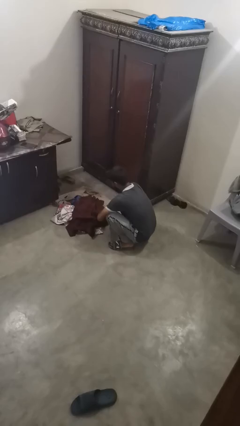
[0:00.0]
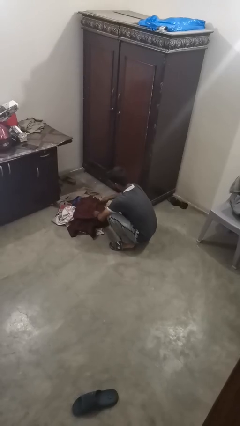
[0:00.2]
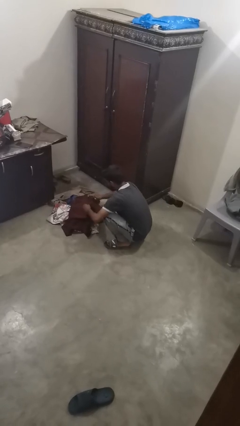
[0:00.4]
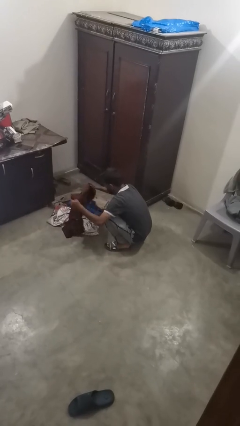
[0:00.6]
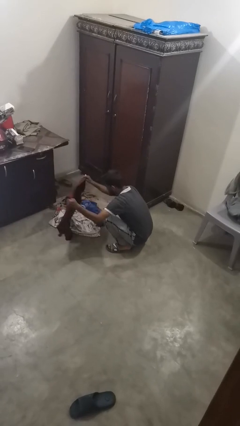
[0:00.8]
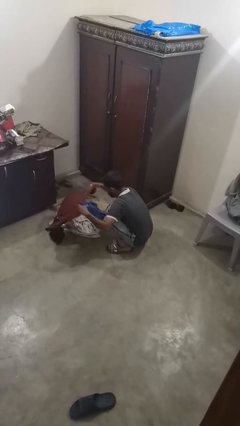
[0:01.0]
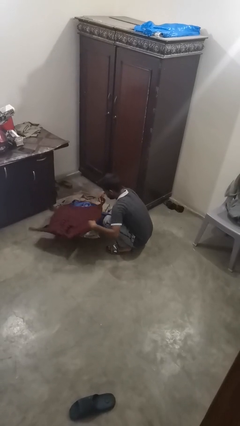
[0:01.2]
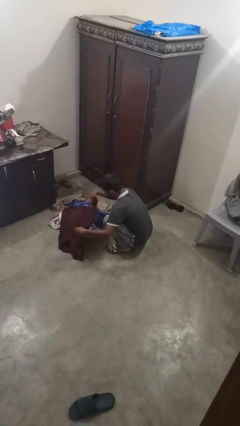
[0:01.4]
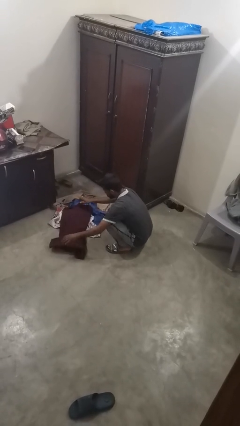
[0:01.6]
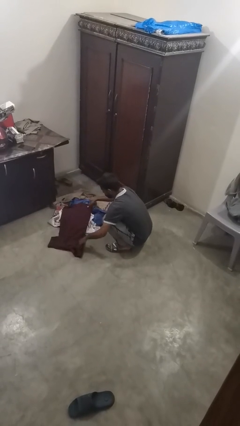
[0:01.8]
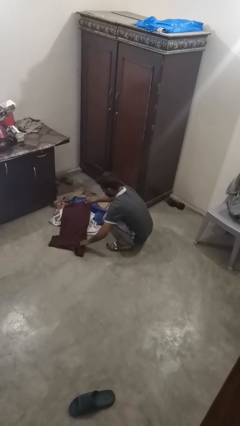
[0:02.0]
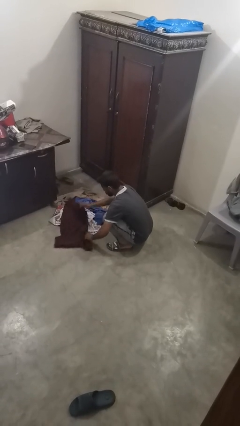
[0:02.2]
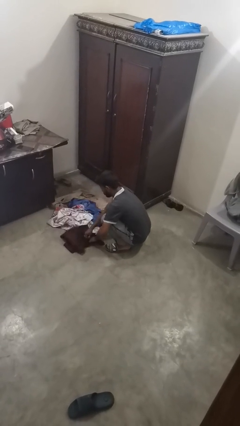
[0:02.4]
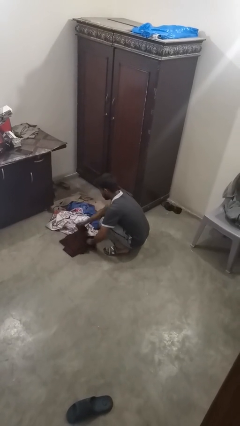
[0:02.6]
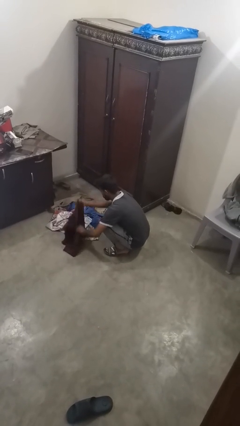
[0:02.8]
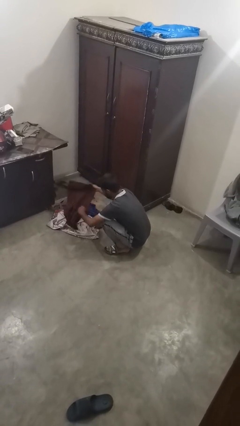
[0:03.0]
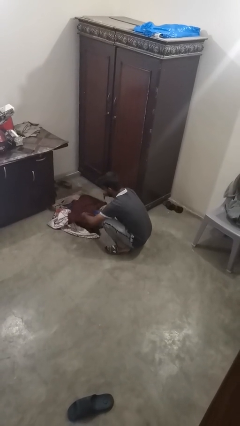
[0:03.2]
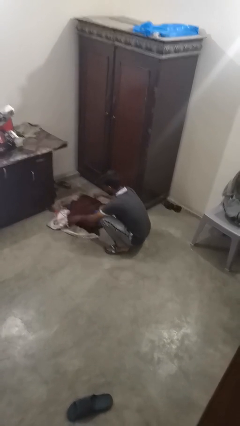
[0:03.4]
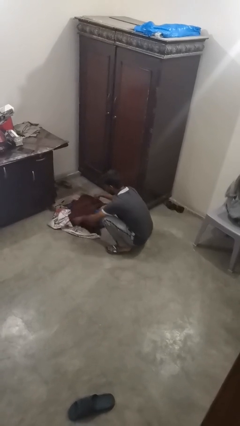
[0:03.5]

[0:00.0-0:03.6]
person folds shirt

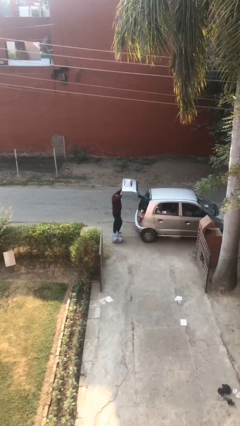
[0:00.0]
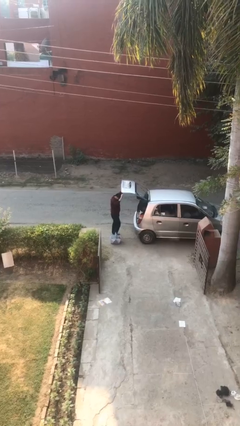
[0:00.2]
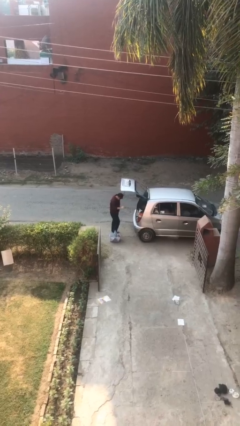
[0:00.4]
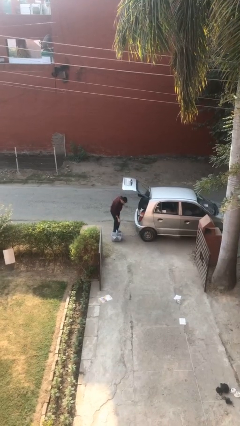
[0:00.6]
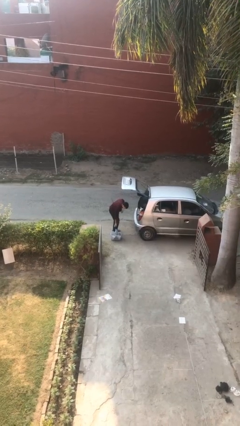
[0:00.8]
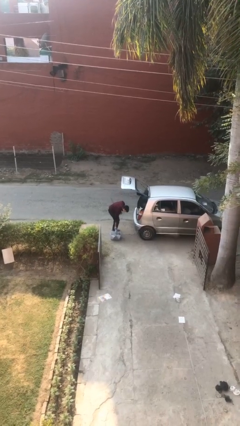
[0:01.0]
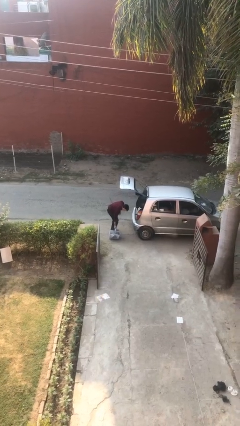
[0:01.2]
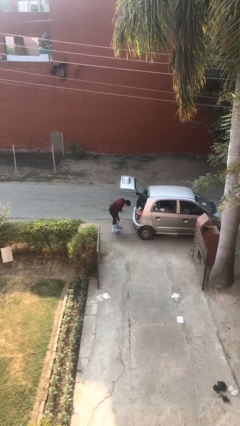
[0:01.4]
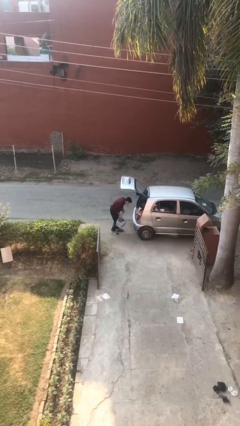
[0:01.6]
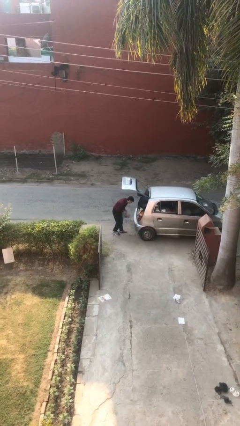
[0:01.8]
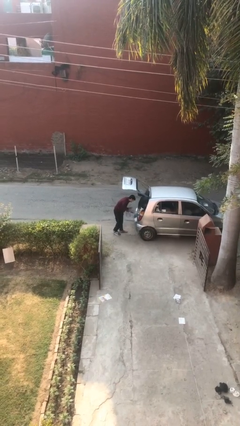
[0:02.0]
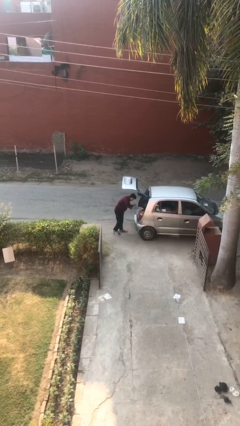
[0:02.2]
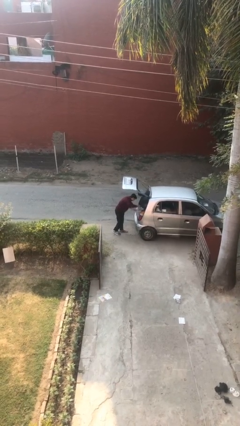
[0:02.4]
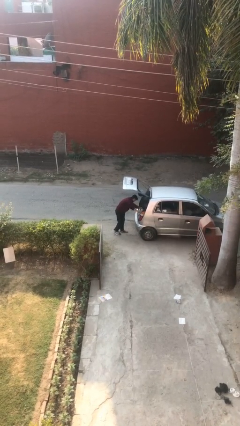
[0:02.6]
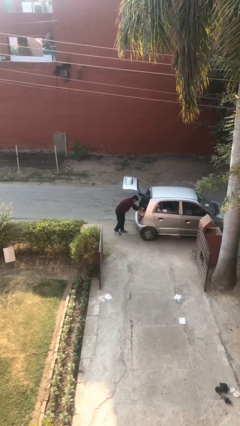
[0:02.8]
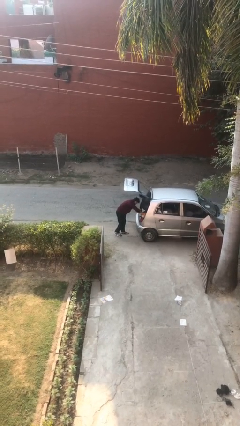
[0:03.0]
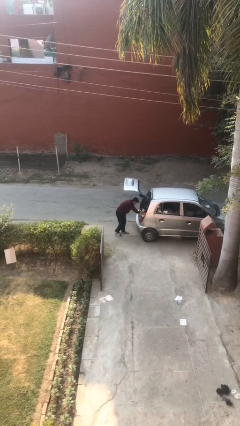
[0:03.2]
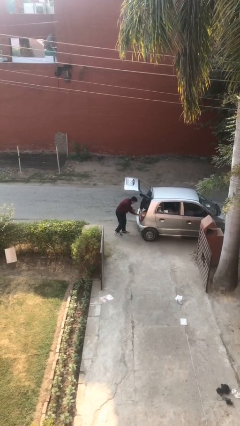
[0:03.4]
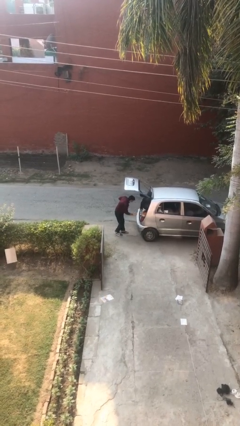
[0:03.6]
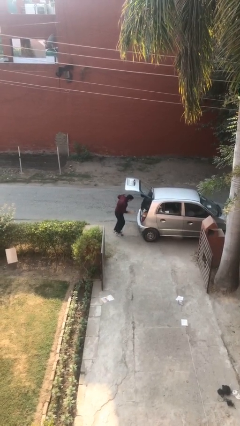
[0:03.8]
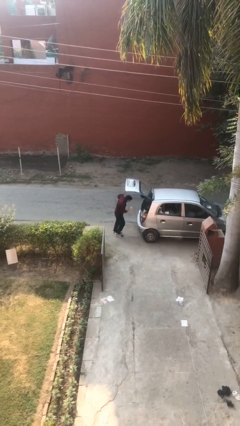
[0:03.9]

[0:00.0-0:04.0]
person loads car

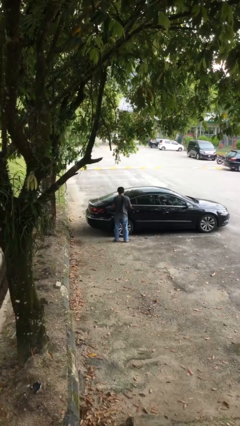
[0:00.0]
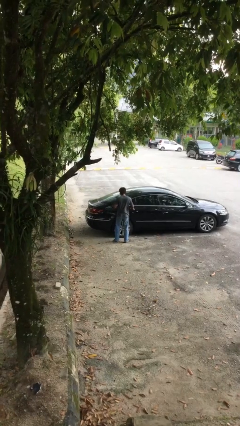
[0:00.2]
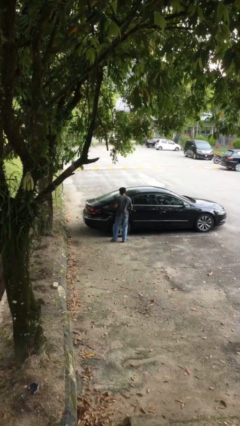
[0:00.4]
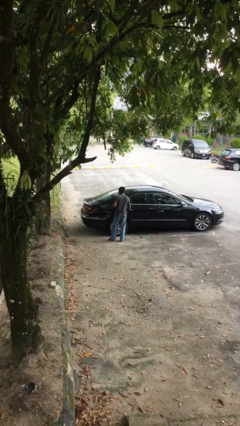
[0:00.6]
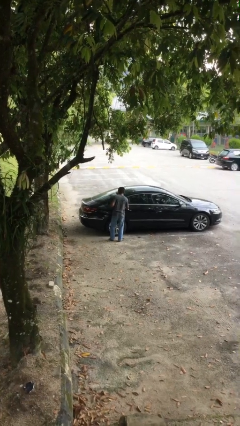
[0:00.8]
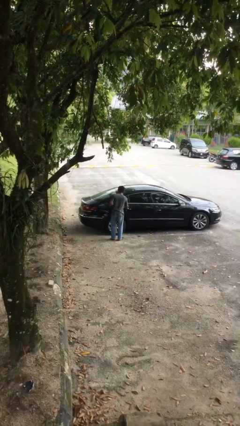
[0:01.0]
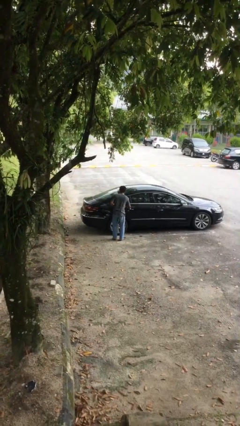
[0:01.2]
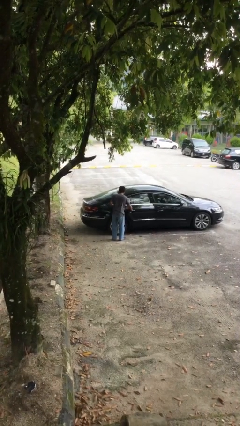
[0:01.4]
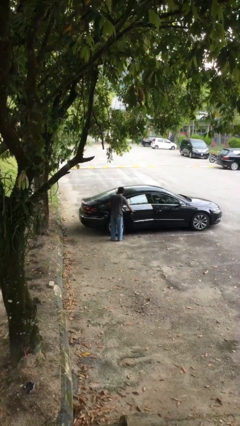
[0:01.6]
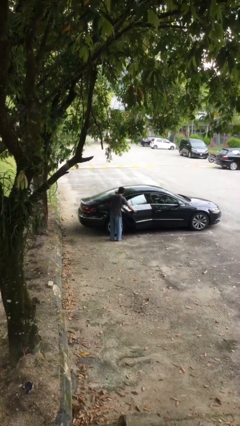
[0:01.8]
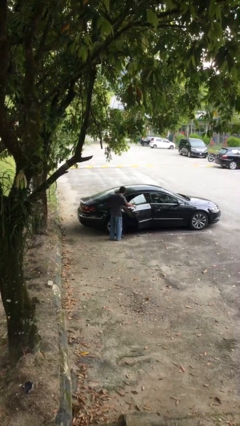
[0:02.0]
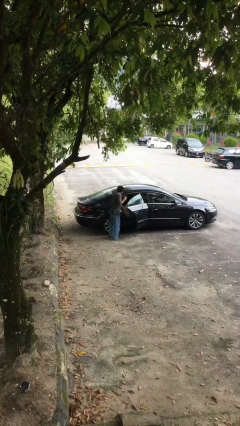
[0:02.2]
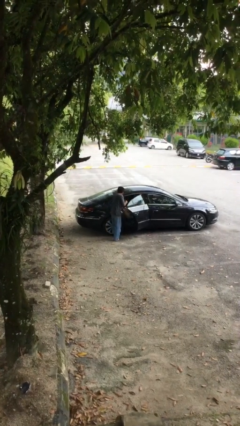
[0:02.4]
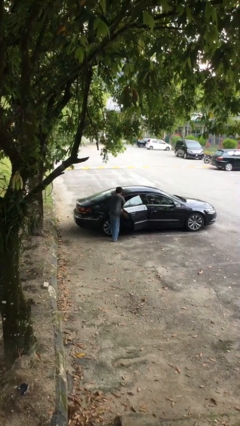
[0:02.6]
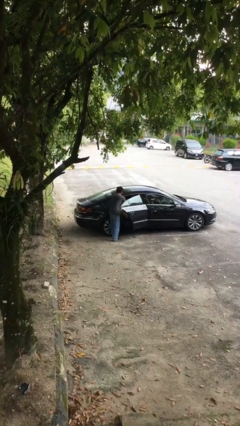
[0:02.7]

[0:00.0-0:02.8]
person opens car door

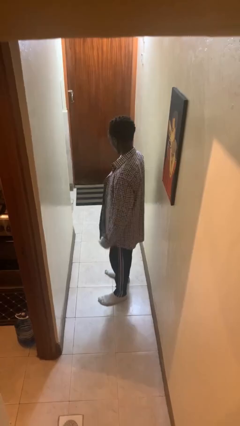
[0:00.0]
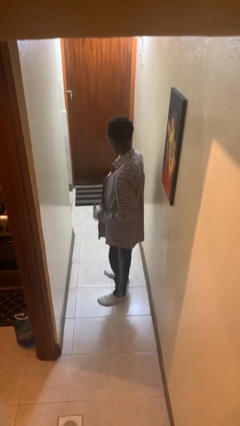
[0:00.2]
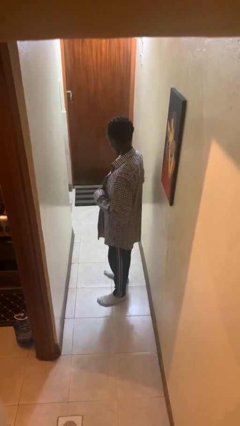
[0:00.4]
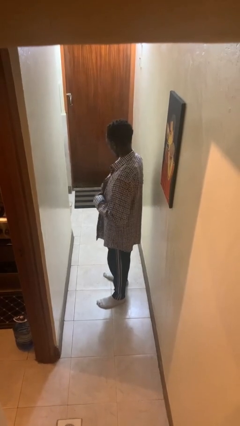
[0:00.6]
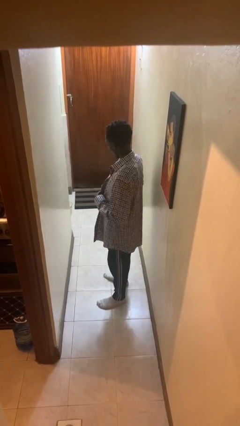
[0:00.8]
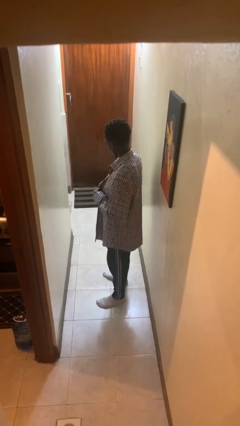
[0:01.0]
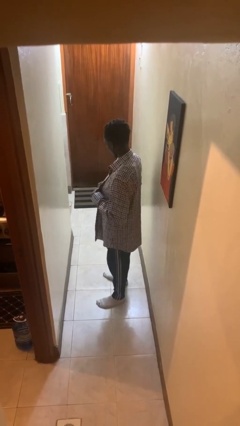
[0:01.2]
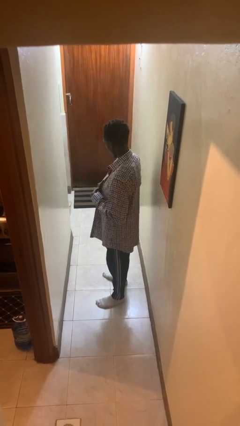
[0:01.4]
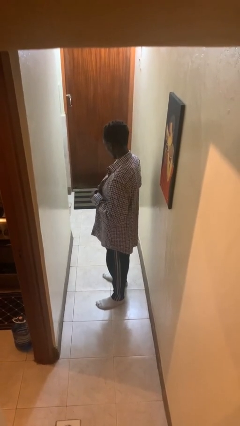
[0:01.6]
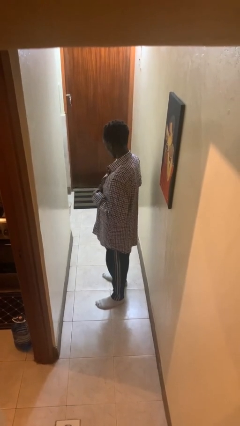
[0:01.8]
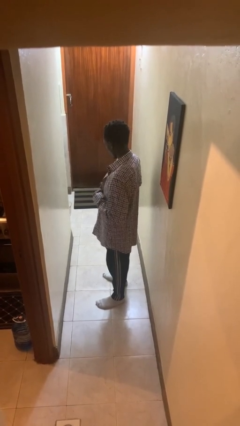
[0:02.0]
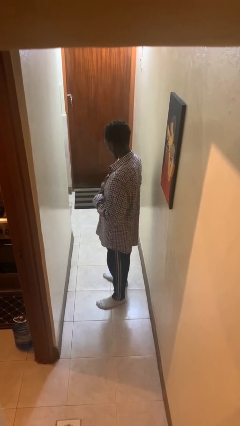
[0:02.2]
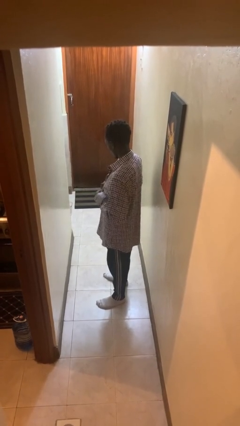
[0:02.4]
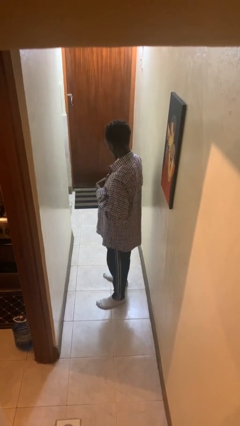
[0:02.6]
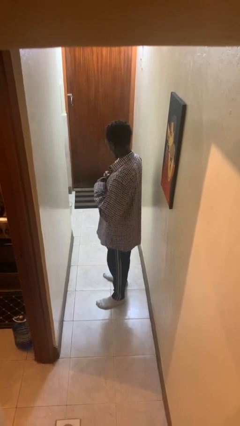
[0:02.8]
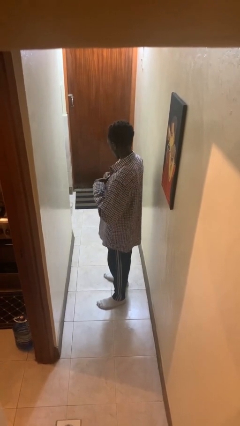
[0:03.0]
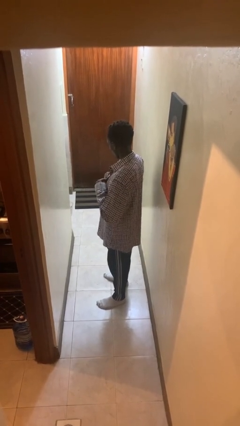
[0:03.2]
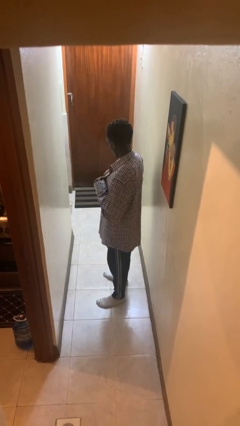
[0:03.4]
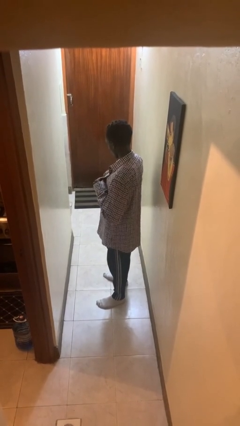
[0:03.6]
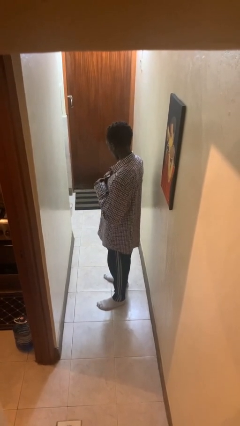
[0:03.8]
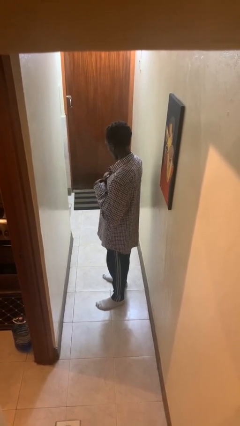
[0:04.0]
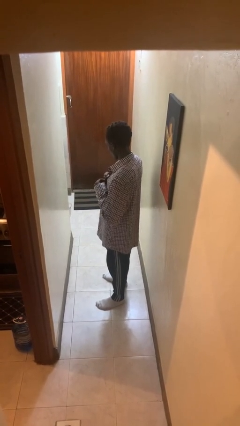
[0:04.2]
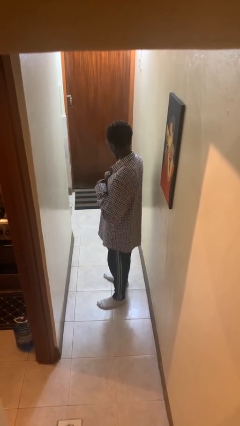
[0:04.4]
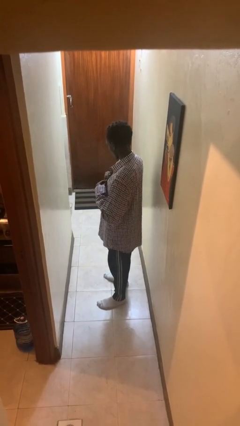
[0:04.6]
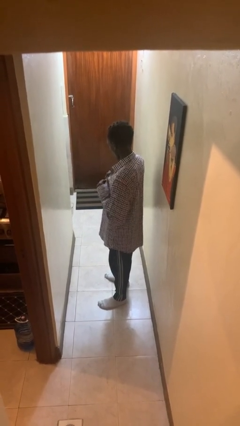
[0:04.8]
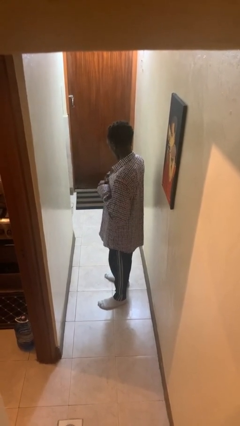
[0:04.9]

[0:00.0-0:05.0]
person buttons shirt

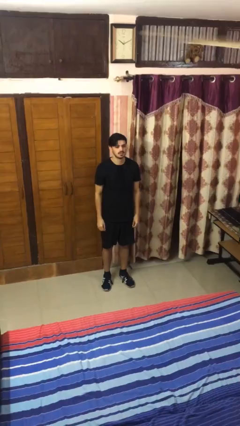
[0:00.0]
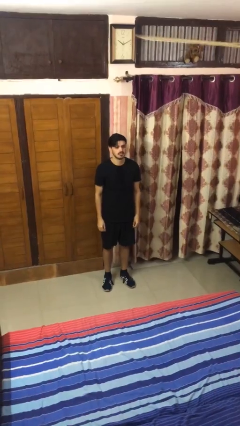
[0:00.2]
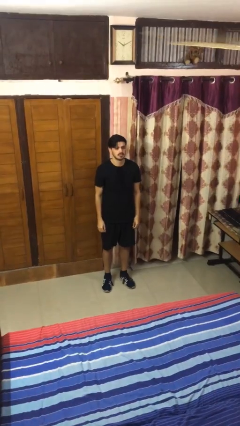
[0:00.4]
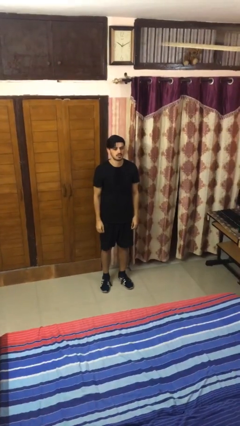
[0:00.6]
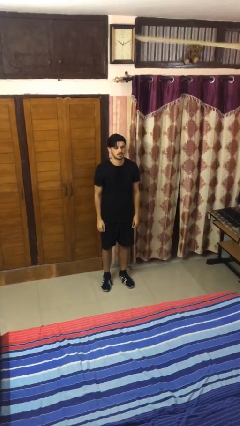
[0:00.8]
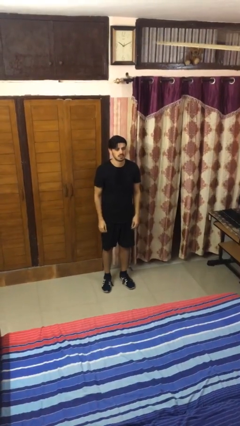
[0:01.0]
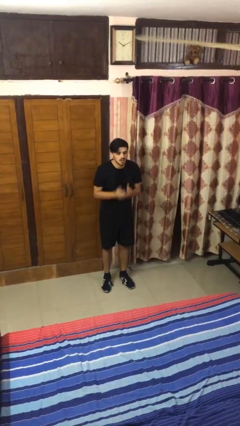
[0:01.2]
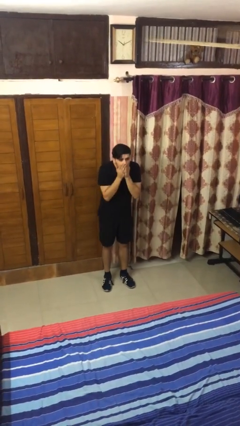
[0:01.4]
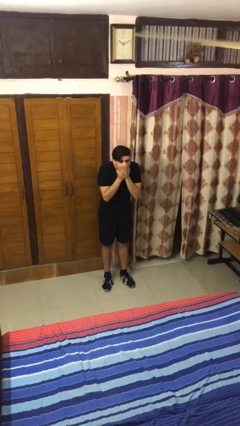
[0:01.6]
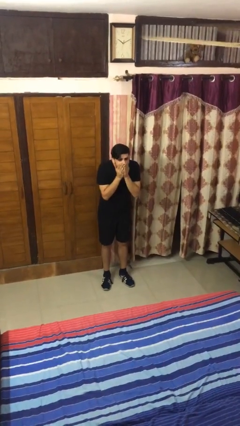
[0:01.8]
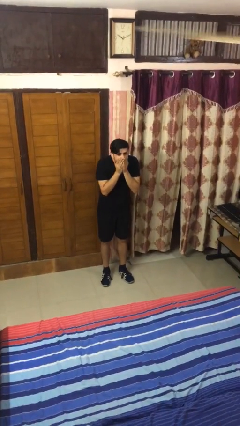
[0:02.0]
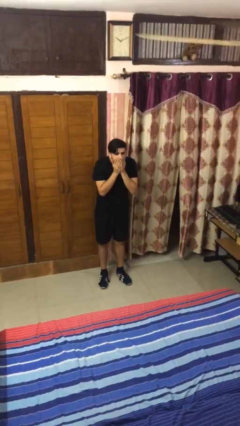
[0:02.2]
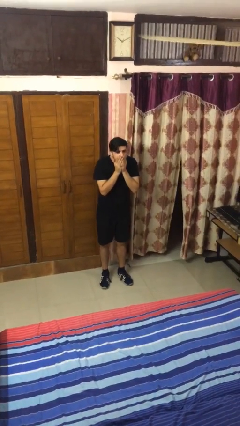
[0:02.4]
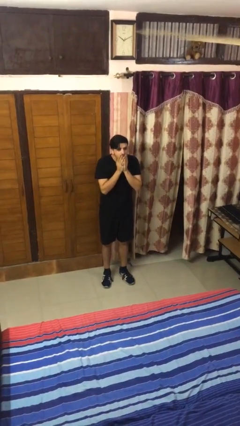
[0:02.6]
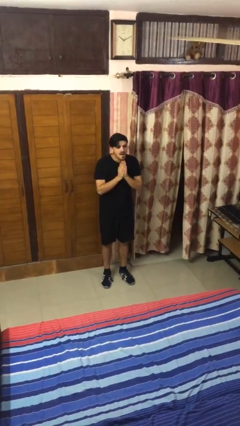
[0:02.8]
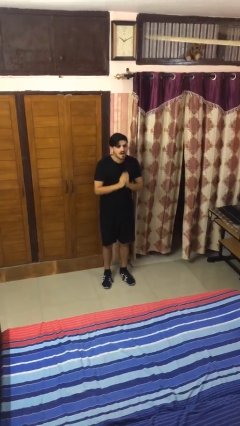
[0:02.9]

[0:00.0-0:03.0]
person covers face with hands
